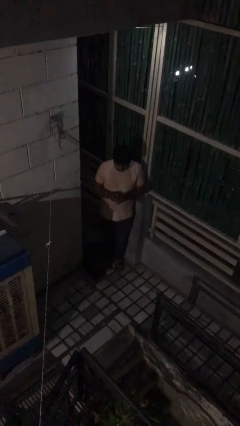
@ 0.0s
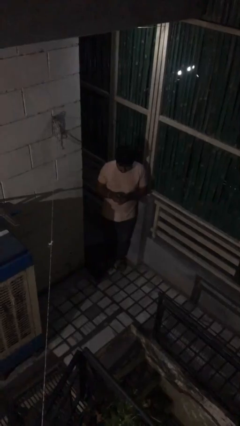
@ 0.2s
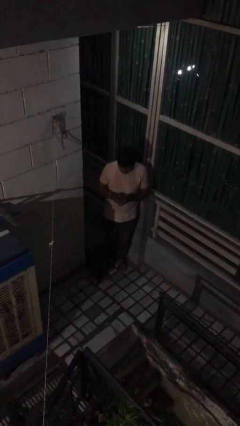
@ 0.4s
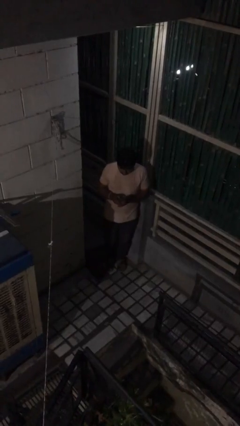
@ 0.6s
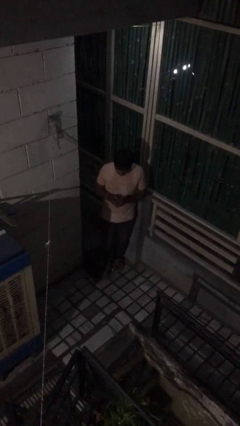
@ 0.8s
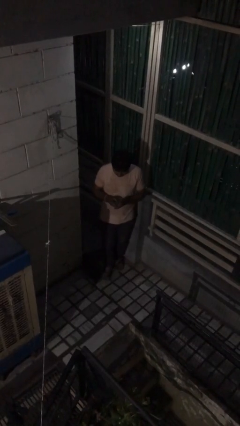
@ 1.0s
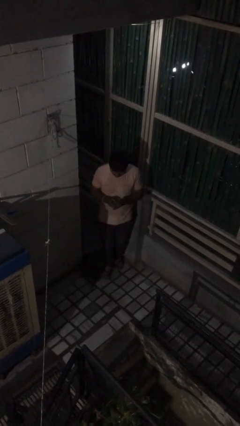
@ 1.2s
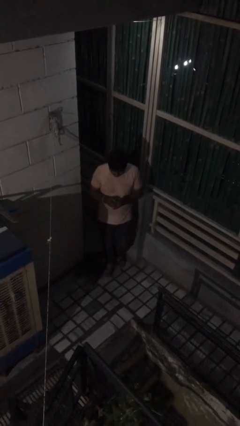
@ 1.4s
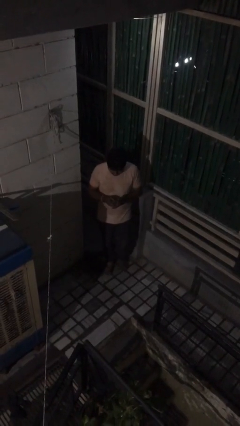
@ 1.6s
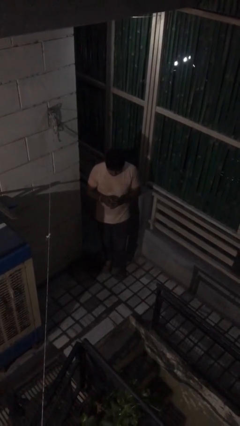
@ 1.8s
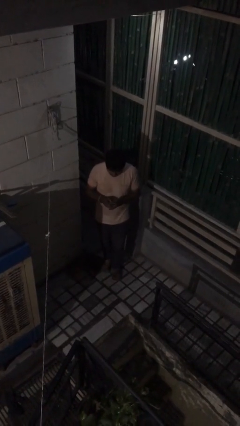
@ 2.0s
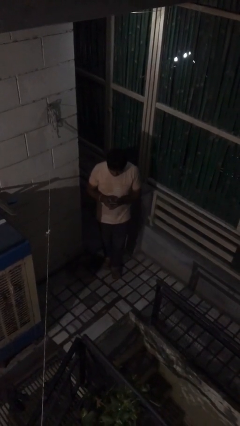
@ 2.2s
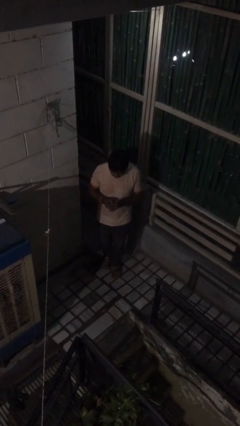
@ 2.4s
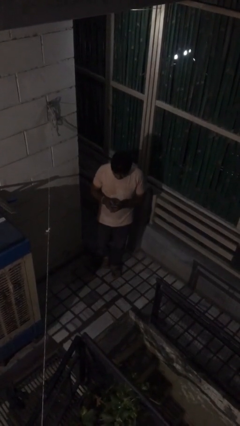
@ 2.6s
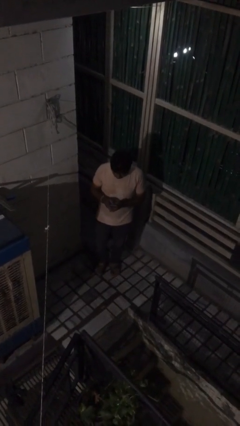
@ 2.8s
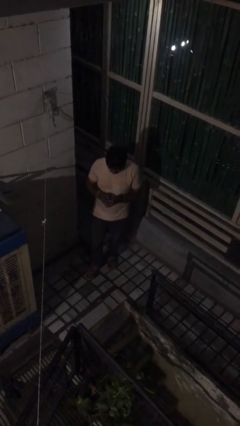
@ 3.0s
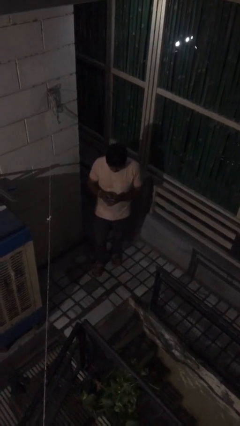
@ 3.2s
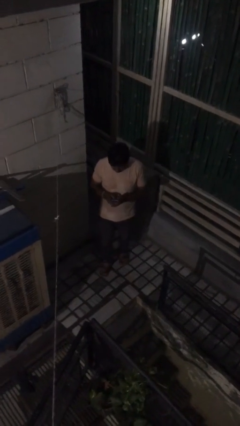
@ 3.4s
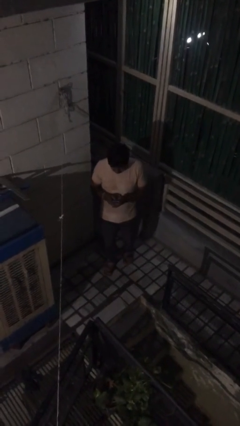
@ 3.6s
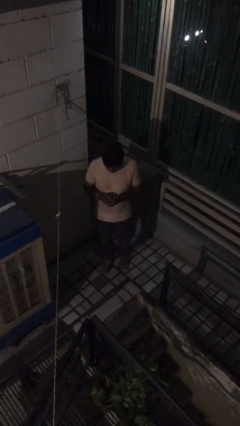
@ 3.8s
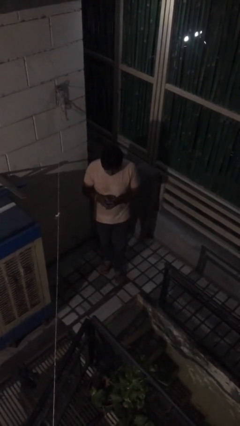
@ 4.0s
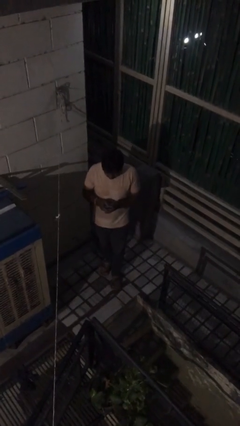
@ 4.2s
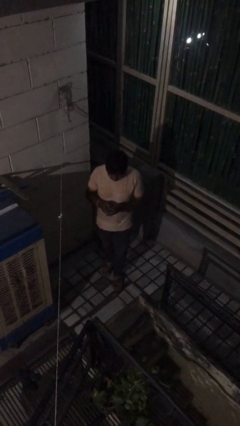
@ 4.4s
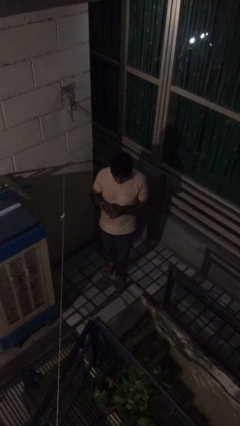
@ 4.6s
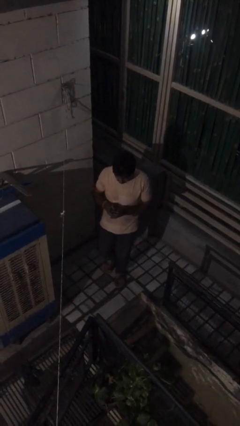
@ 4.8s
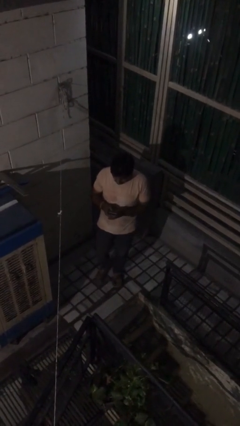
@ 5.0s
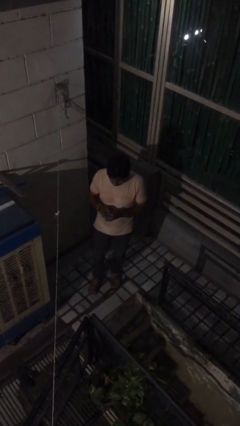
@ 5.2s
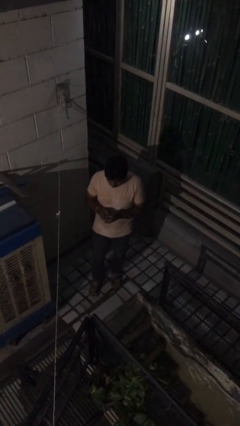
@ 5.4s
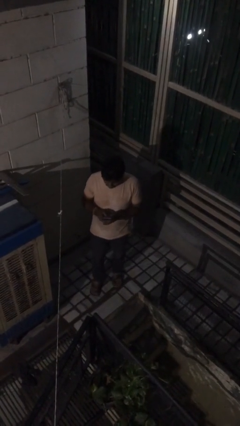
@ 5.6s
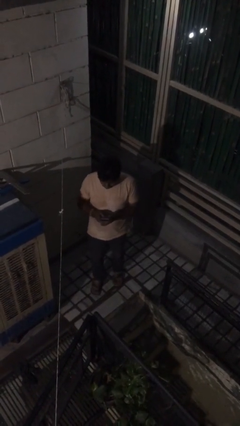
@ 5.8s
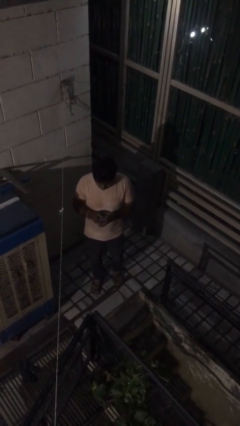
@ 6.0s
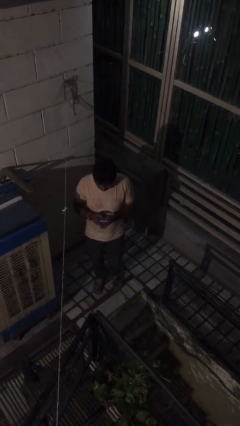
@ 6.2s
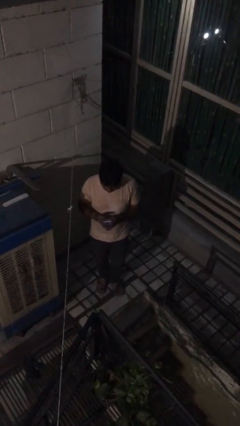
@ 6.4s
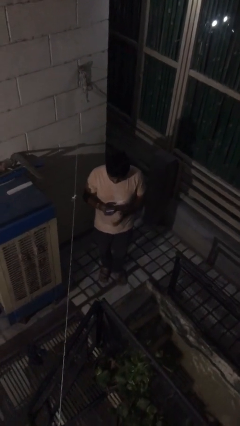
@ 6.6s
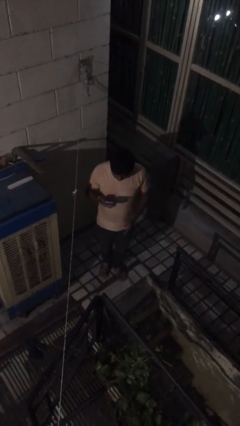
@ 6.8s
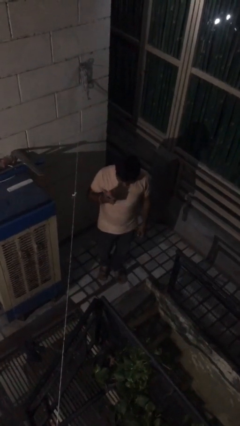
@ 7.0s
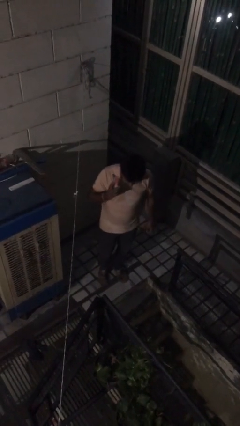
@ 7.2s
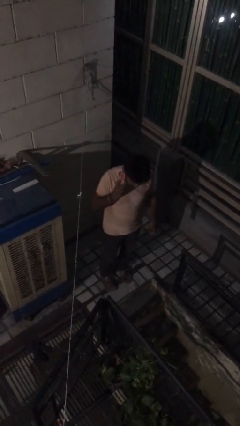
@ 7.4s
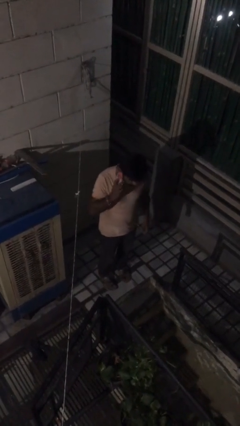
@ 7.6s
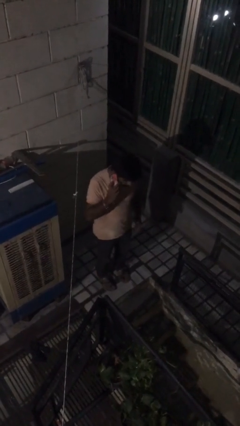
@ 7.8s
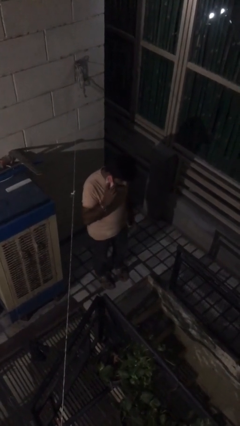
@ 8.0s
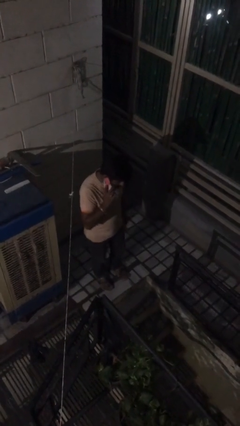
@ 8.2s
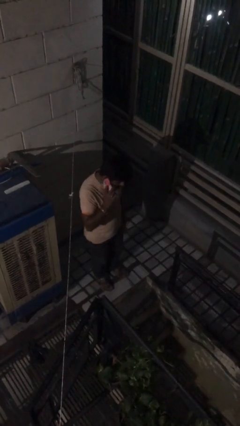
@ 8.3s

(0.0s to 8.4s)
person texts on phone

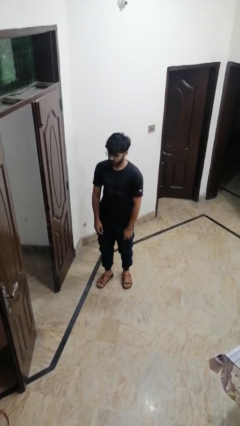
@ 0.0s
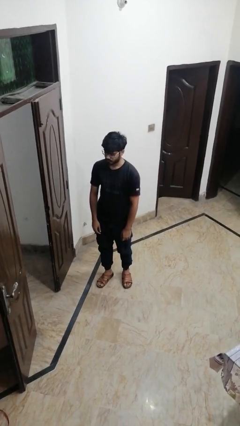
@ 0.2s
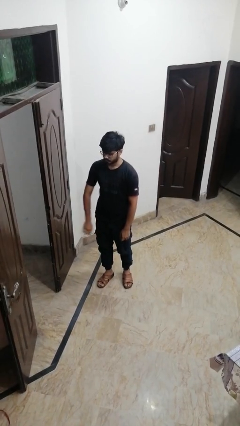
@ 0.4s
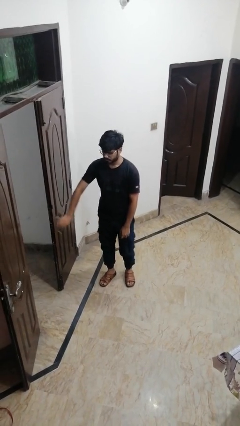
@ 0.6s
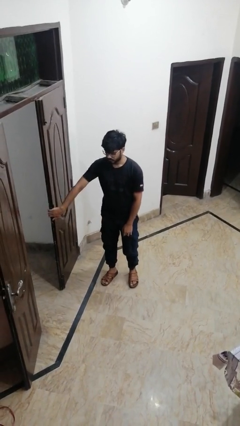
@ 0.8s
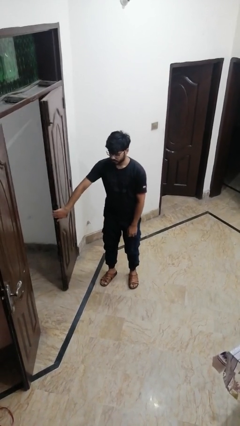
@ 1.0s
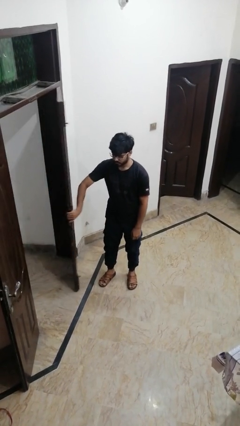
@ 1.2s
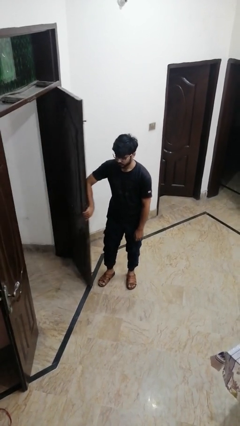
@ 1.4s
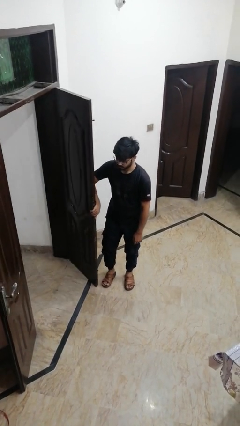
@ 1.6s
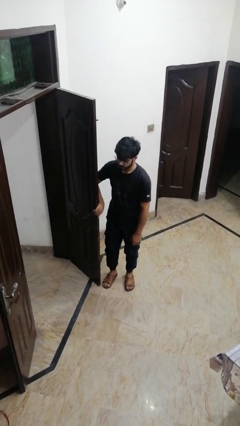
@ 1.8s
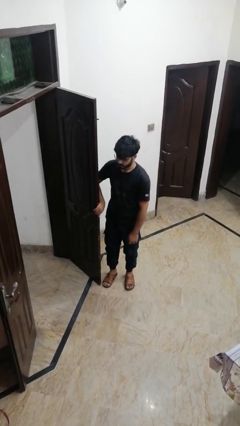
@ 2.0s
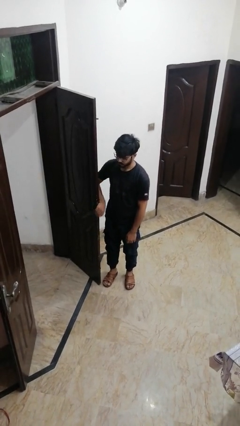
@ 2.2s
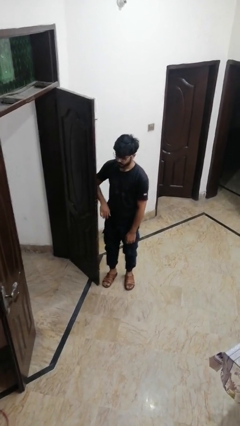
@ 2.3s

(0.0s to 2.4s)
person opens facility door

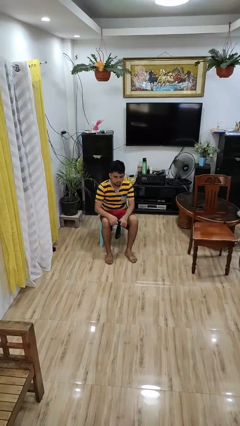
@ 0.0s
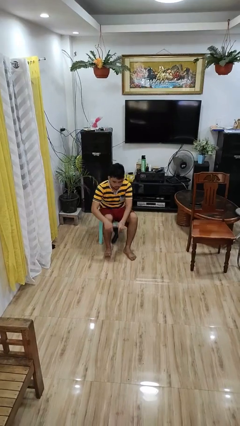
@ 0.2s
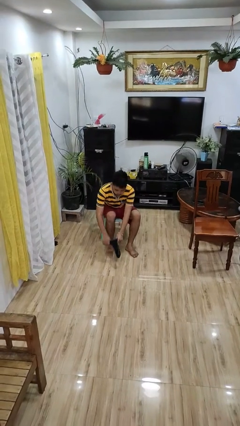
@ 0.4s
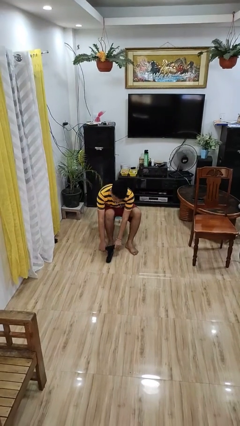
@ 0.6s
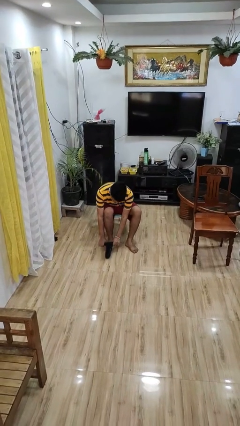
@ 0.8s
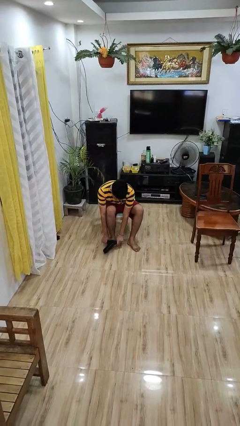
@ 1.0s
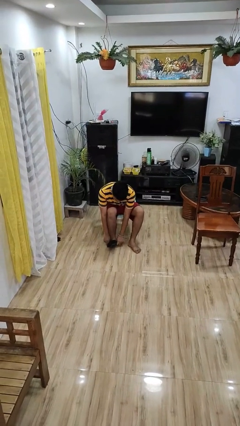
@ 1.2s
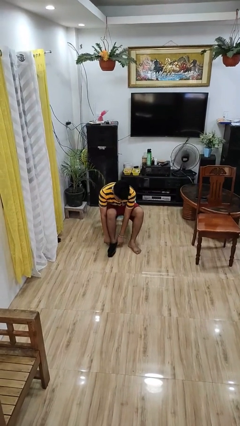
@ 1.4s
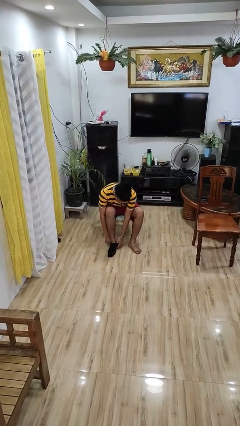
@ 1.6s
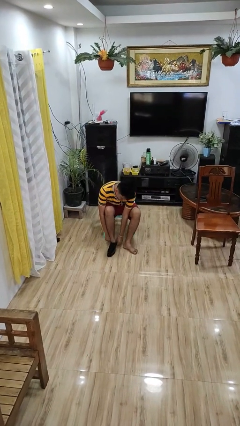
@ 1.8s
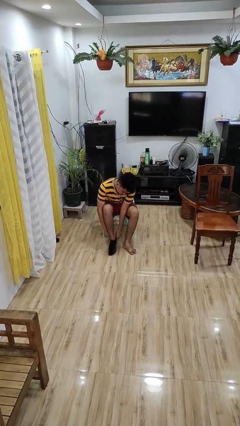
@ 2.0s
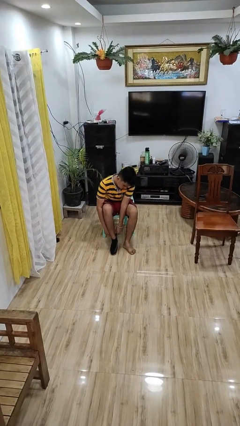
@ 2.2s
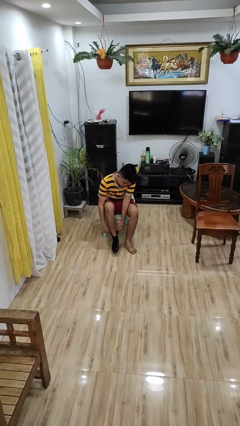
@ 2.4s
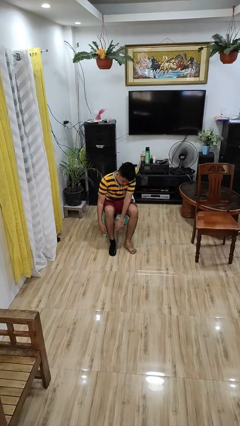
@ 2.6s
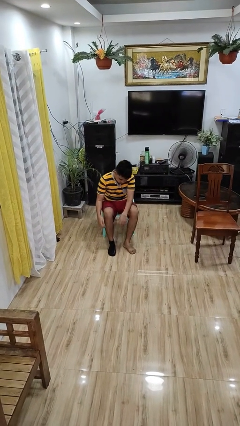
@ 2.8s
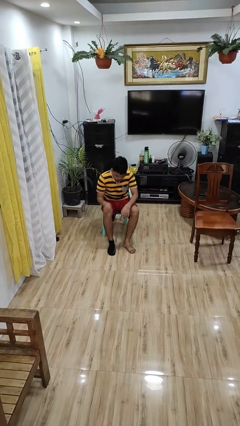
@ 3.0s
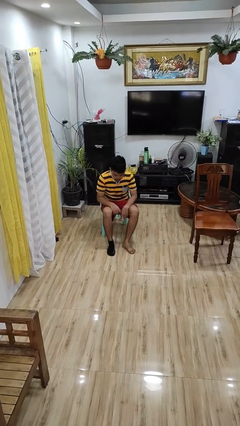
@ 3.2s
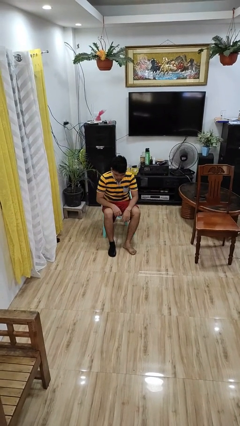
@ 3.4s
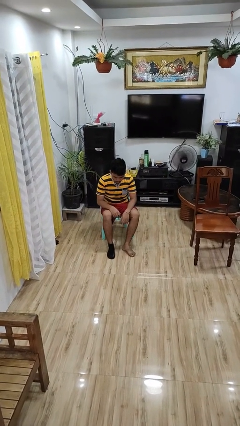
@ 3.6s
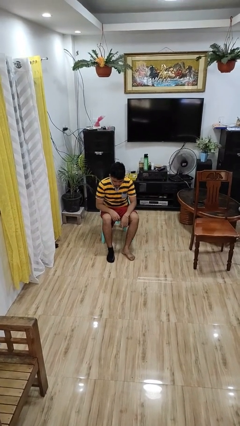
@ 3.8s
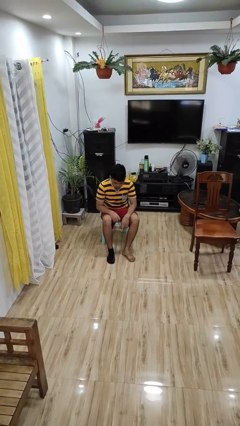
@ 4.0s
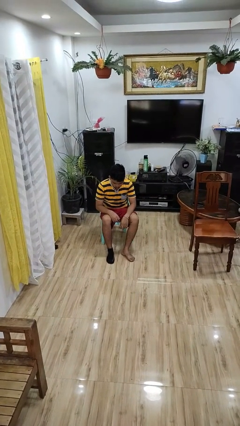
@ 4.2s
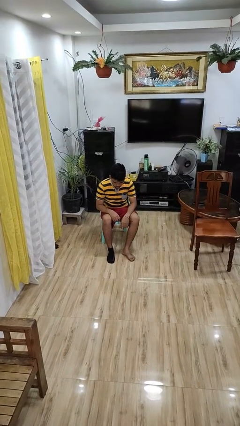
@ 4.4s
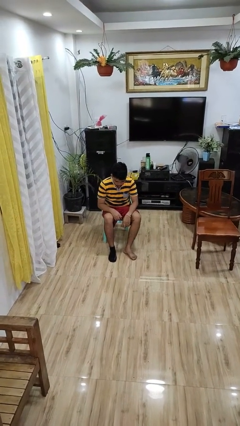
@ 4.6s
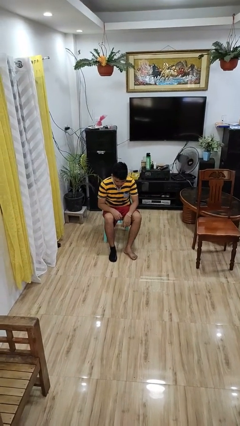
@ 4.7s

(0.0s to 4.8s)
person puts on socks

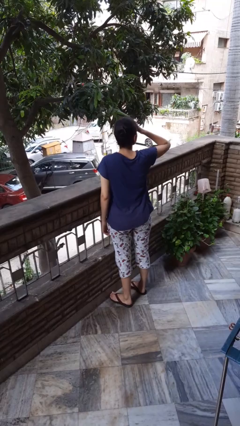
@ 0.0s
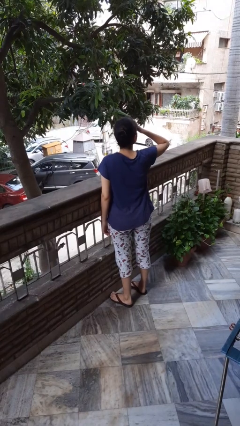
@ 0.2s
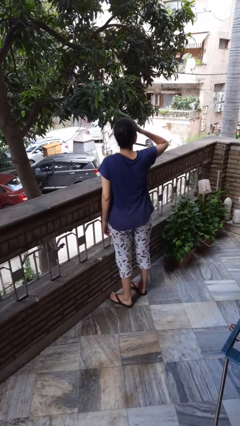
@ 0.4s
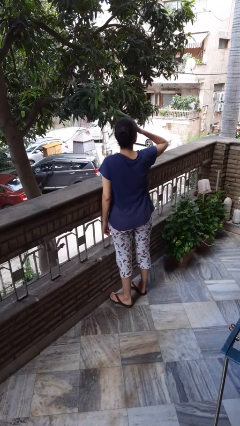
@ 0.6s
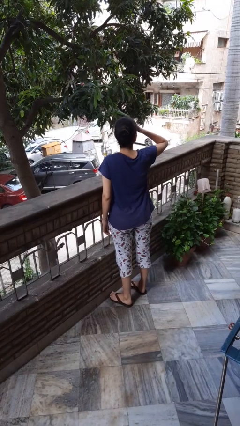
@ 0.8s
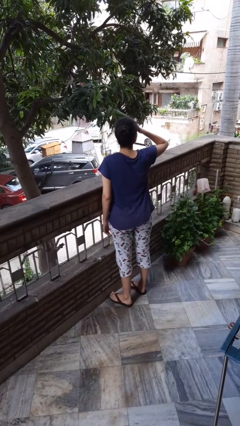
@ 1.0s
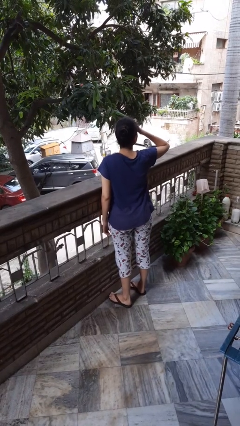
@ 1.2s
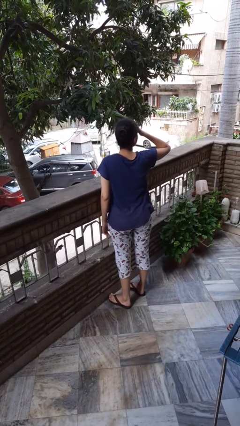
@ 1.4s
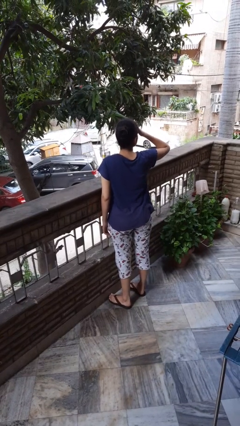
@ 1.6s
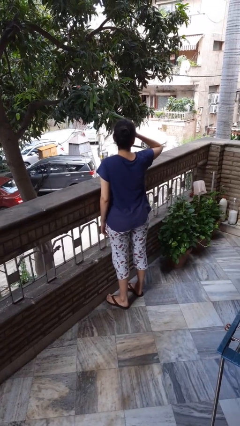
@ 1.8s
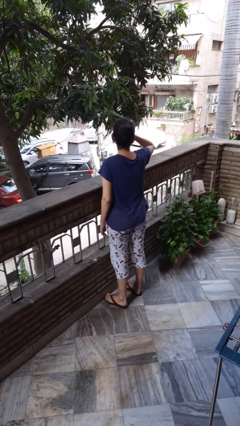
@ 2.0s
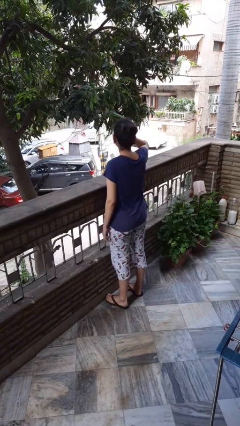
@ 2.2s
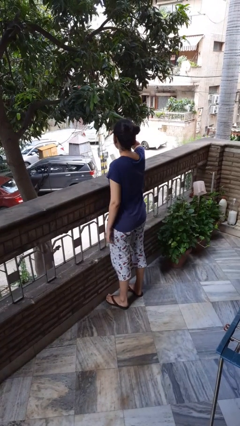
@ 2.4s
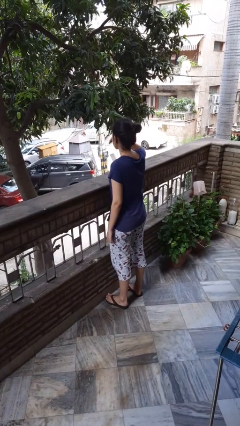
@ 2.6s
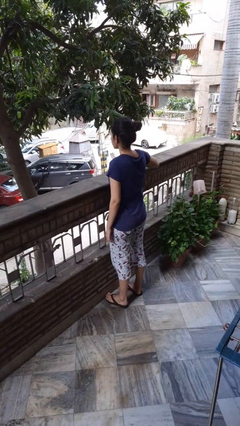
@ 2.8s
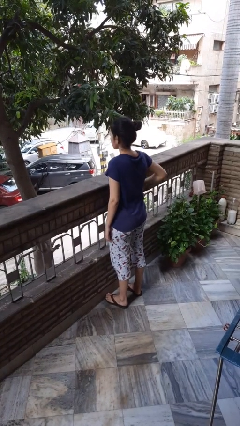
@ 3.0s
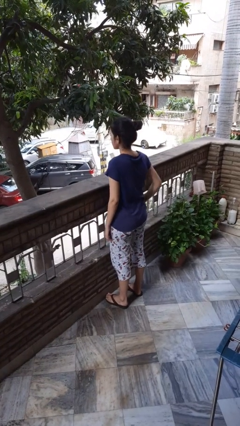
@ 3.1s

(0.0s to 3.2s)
person shades eyes
